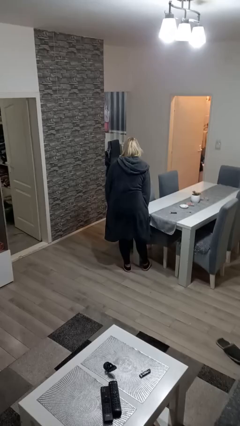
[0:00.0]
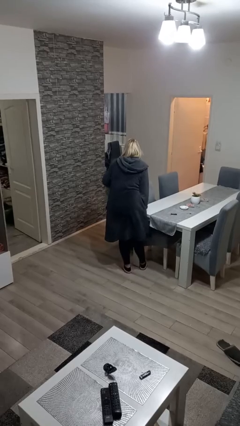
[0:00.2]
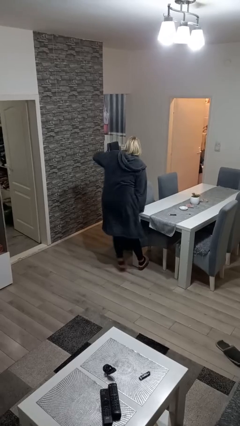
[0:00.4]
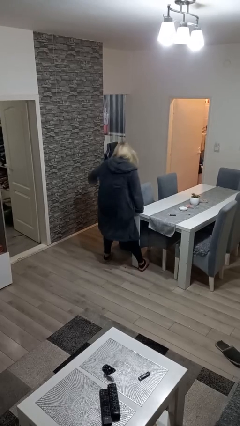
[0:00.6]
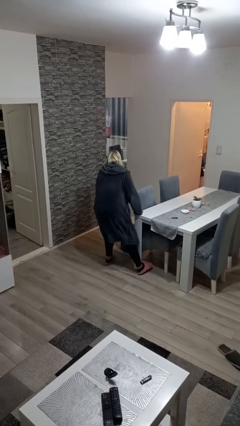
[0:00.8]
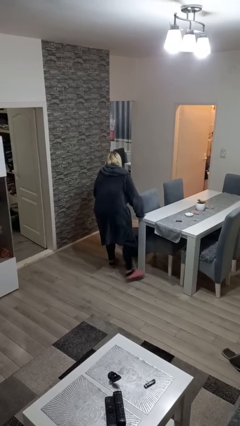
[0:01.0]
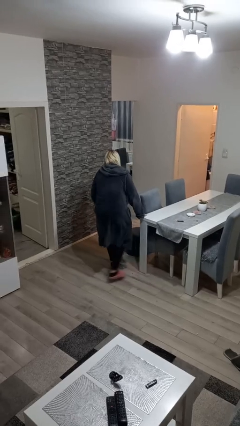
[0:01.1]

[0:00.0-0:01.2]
person bumps into table

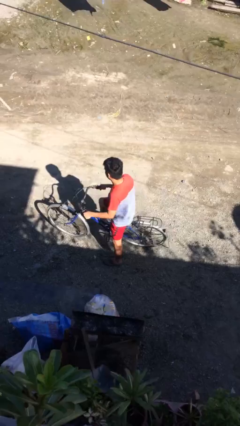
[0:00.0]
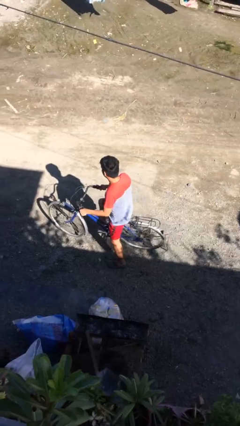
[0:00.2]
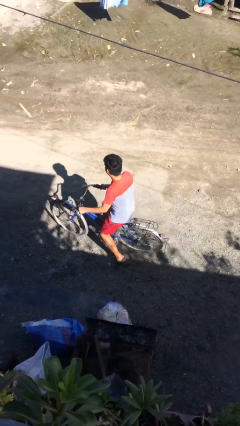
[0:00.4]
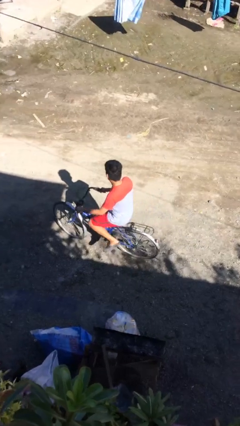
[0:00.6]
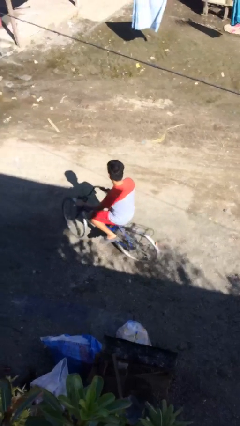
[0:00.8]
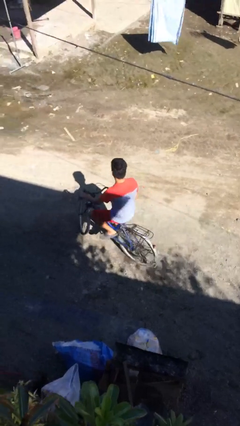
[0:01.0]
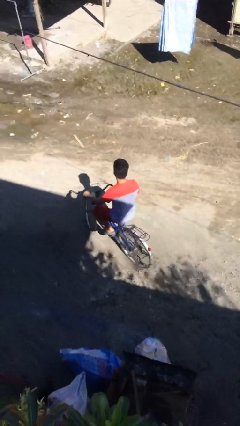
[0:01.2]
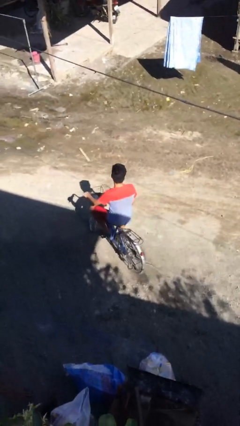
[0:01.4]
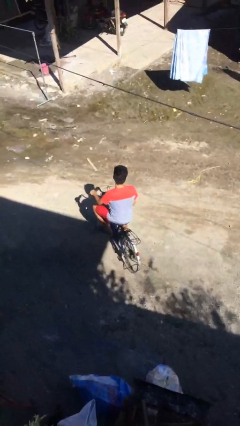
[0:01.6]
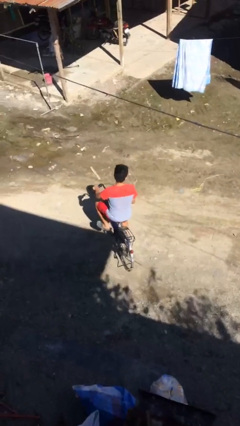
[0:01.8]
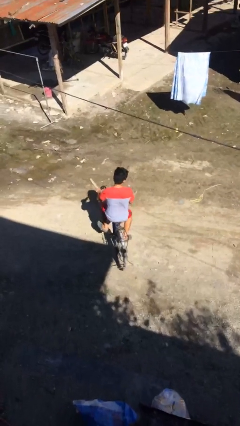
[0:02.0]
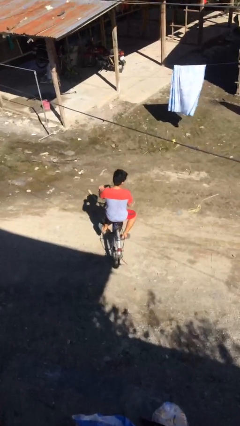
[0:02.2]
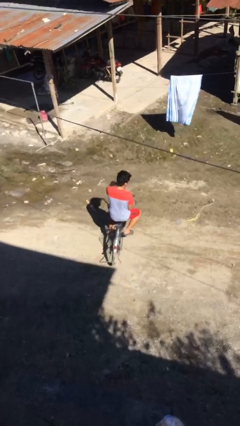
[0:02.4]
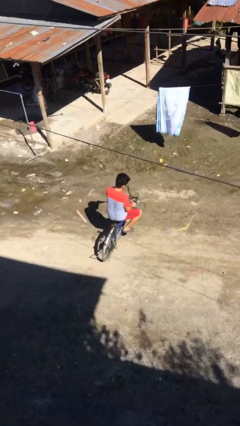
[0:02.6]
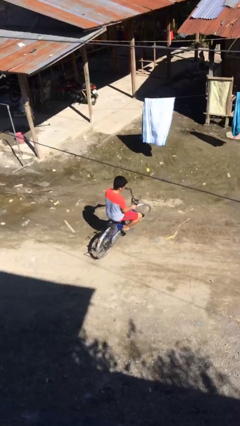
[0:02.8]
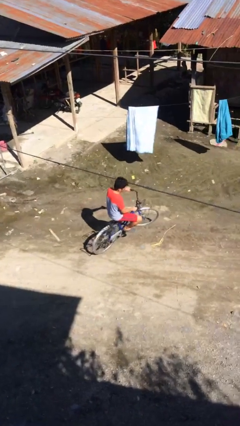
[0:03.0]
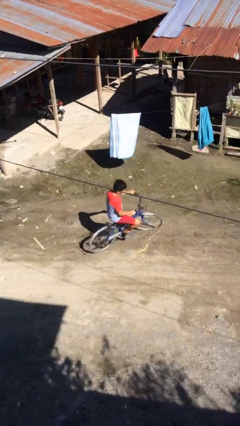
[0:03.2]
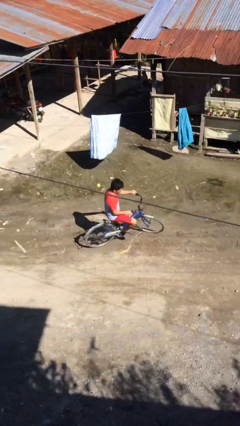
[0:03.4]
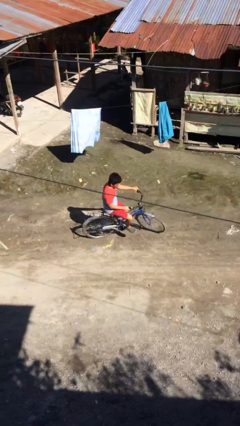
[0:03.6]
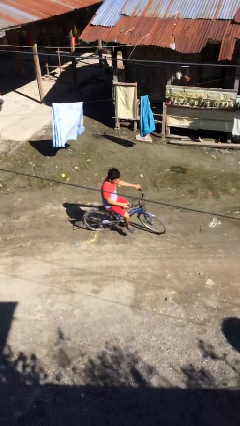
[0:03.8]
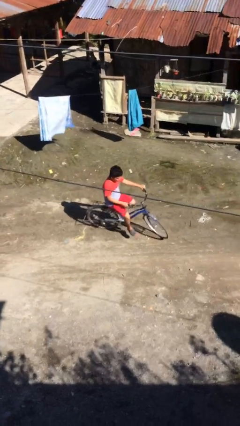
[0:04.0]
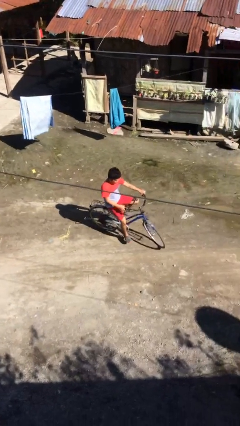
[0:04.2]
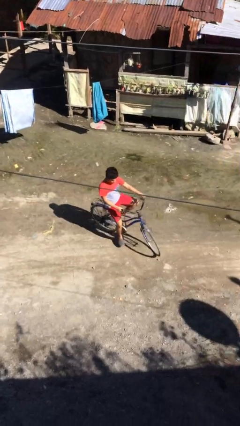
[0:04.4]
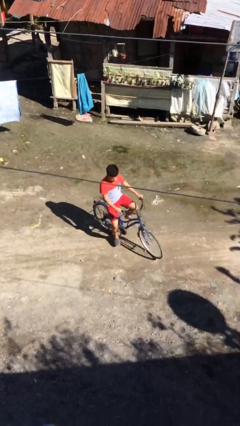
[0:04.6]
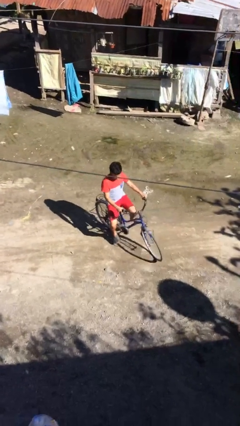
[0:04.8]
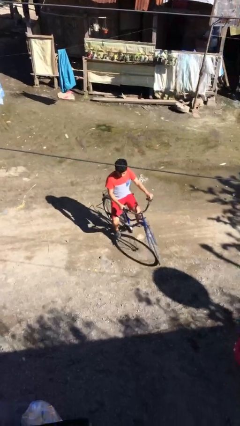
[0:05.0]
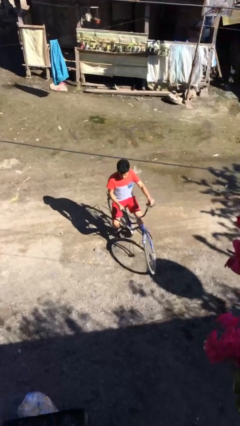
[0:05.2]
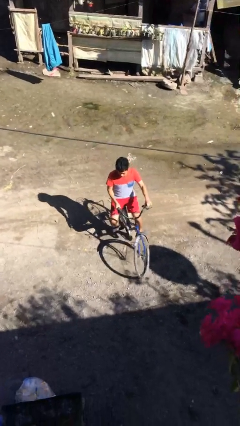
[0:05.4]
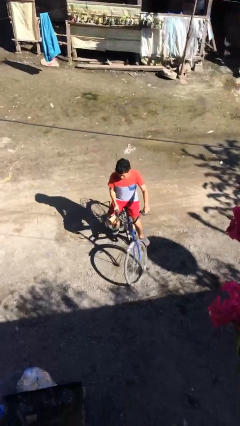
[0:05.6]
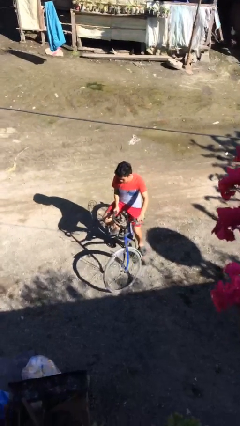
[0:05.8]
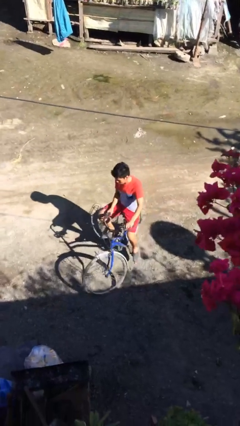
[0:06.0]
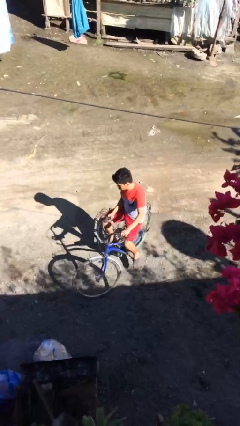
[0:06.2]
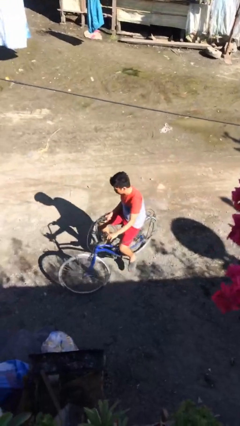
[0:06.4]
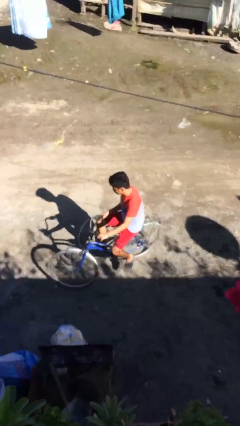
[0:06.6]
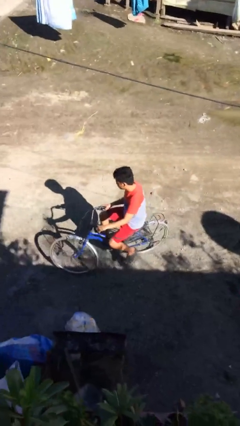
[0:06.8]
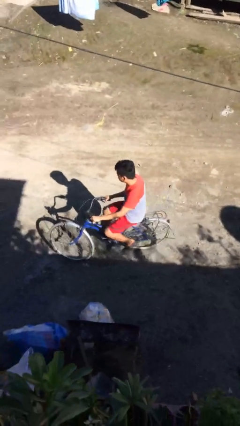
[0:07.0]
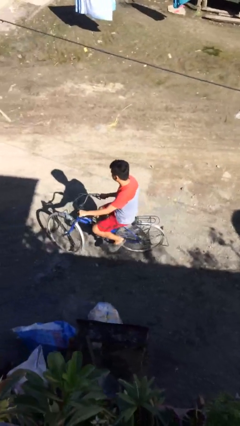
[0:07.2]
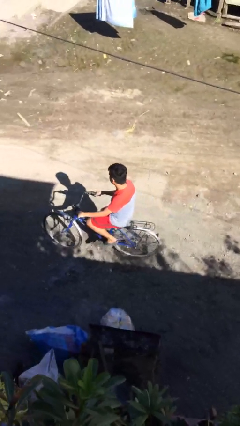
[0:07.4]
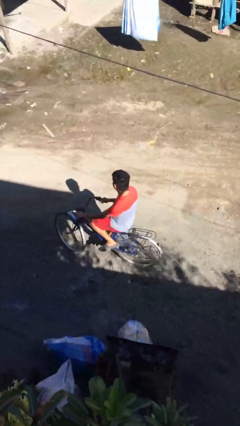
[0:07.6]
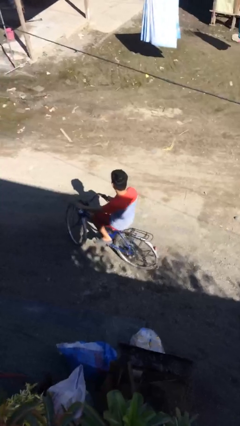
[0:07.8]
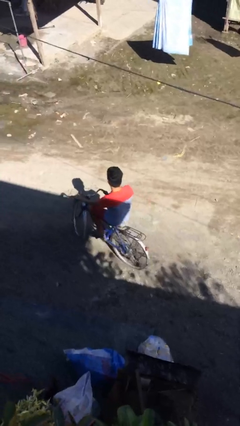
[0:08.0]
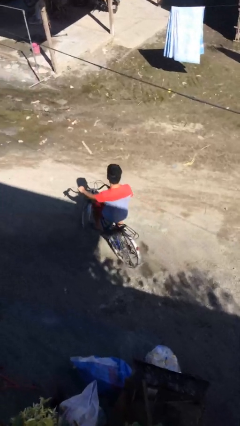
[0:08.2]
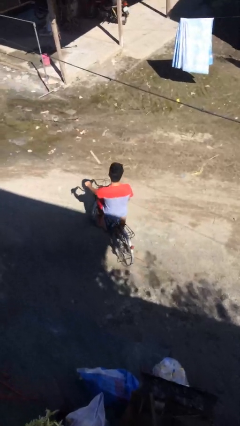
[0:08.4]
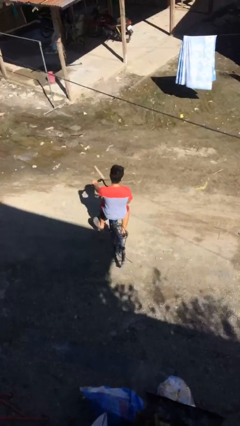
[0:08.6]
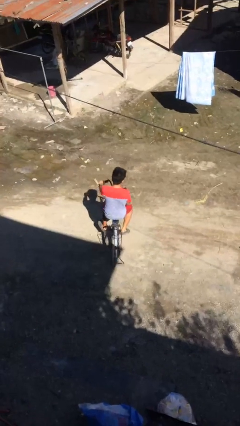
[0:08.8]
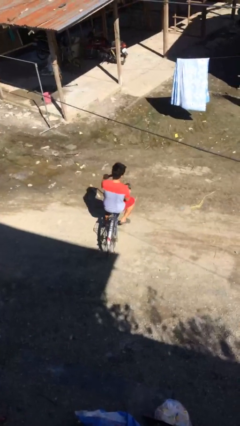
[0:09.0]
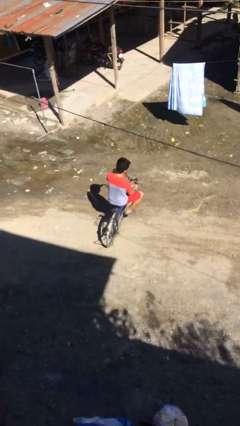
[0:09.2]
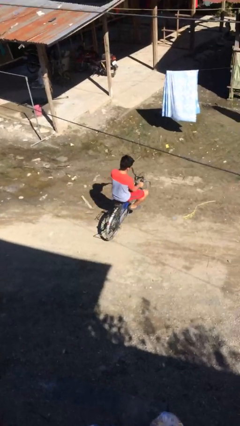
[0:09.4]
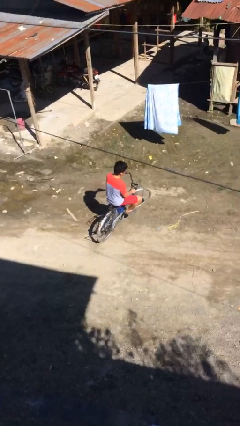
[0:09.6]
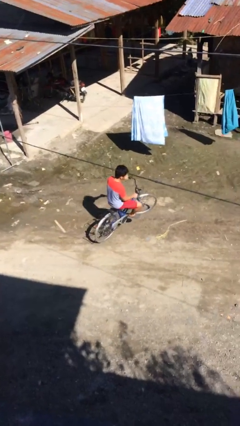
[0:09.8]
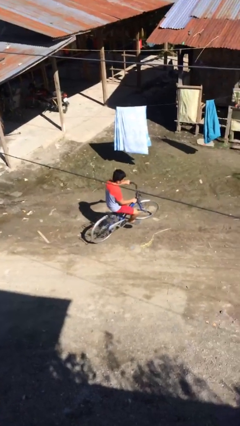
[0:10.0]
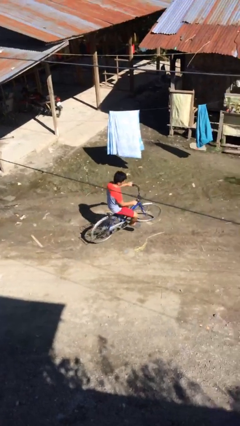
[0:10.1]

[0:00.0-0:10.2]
person rides bicycle

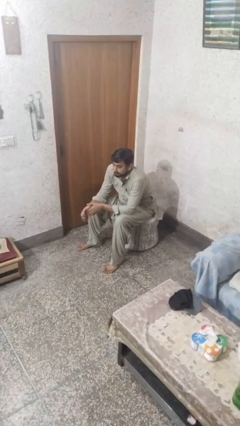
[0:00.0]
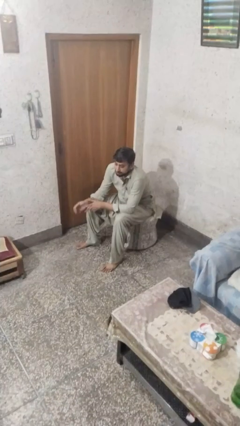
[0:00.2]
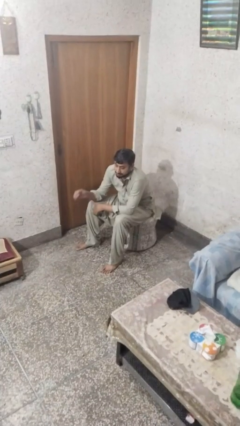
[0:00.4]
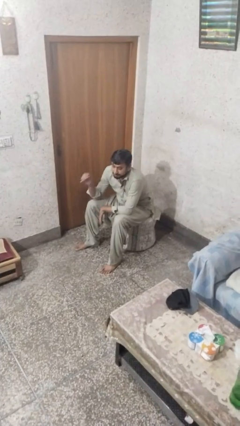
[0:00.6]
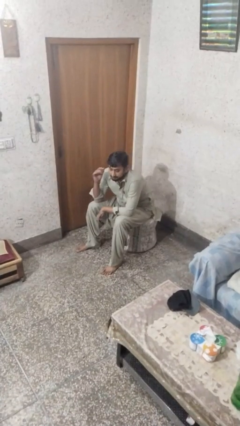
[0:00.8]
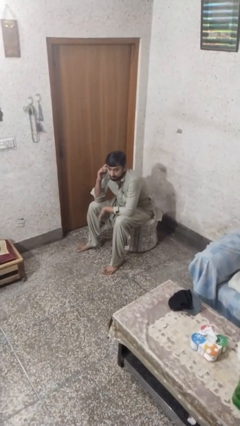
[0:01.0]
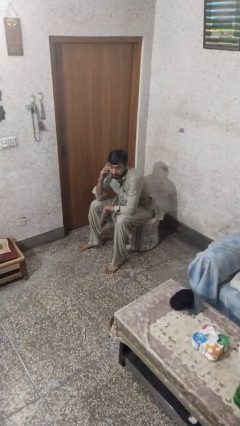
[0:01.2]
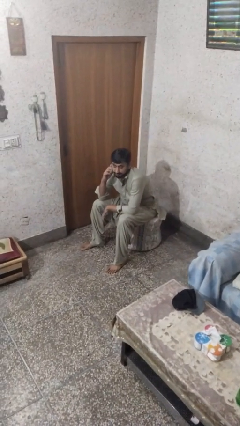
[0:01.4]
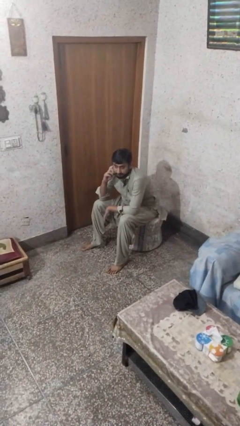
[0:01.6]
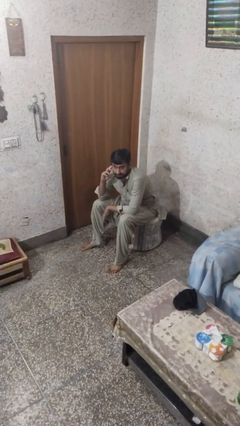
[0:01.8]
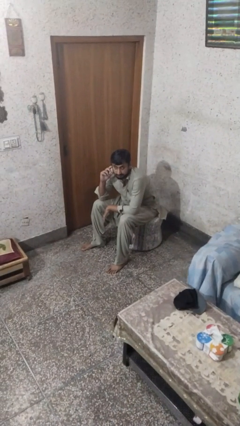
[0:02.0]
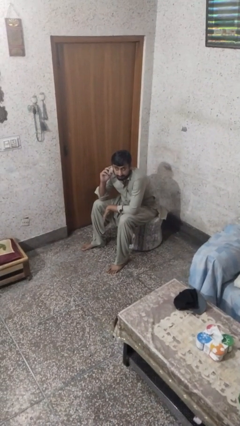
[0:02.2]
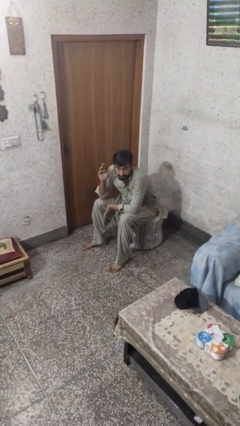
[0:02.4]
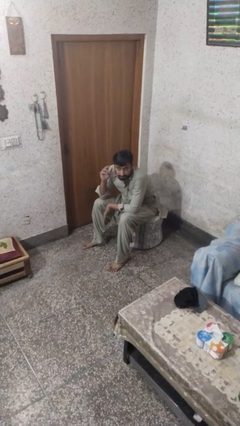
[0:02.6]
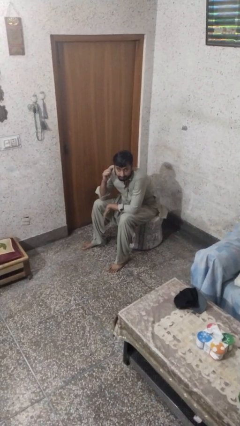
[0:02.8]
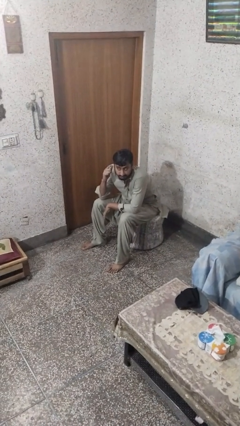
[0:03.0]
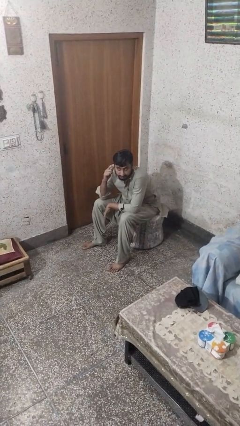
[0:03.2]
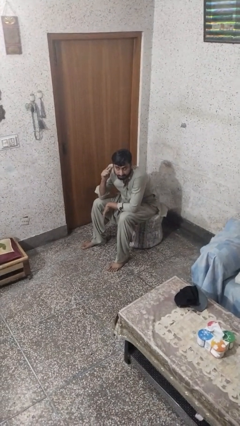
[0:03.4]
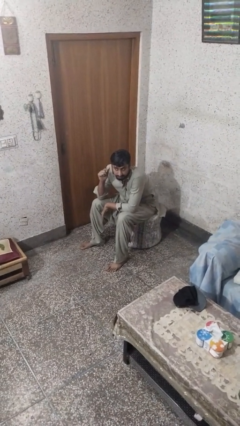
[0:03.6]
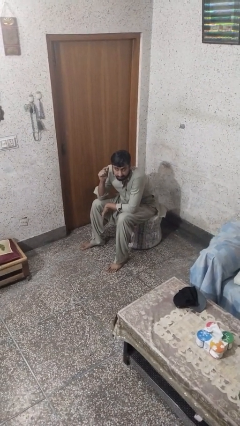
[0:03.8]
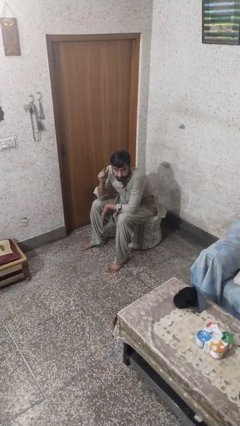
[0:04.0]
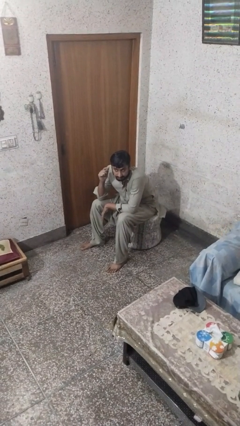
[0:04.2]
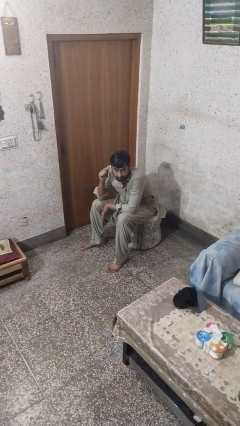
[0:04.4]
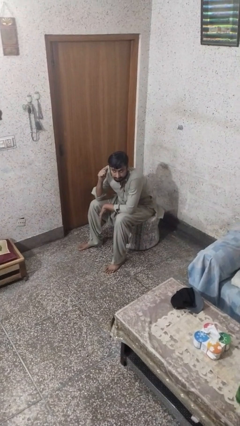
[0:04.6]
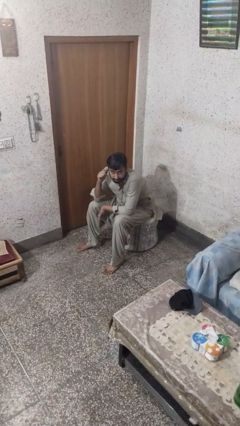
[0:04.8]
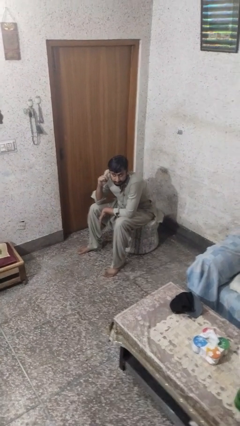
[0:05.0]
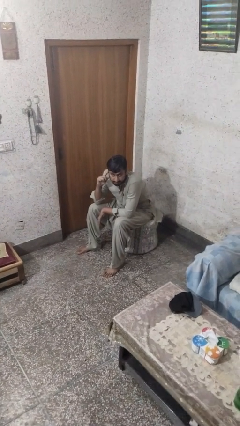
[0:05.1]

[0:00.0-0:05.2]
person gestures listen closely

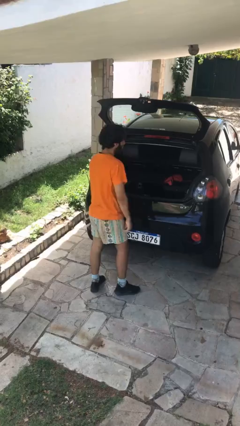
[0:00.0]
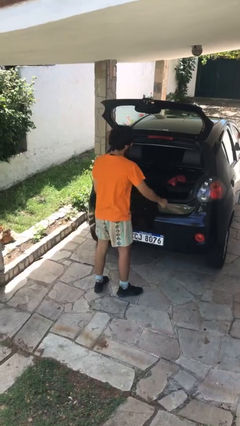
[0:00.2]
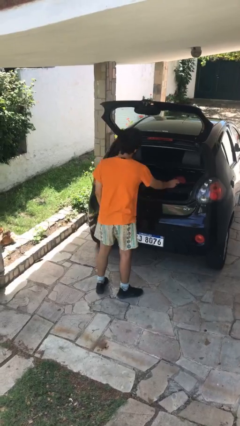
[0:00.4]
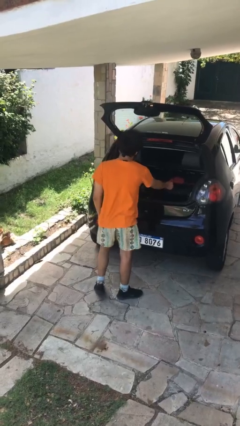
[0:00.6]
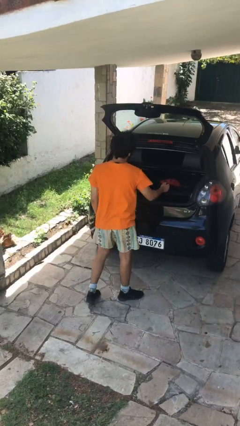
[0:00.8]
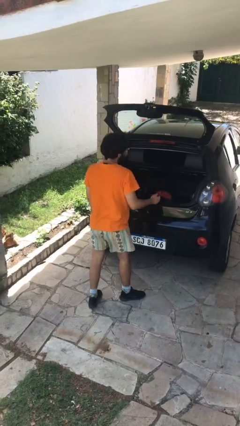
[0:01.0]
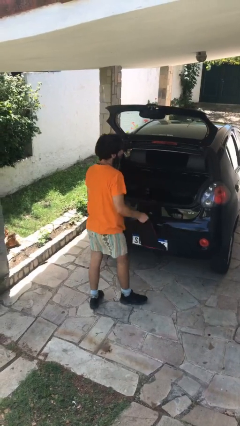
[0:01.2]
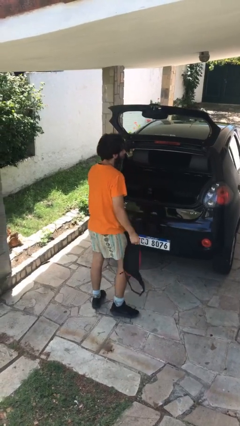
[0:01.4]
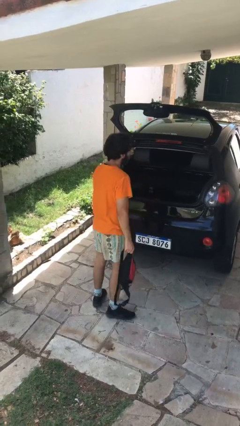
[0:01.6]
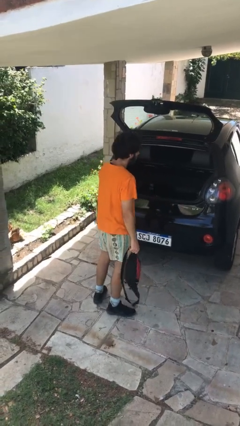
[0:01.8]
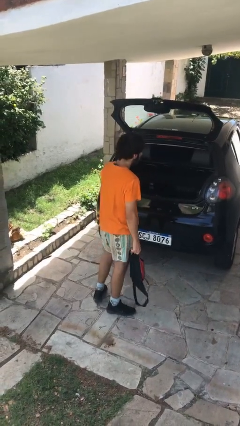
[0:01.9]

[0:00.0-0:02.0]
person unloads car
